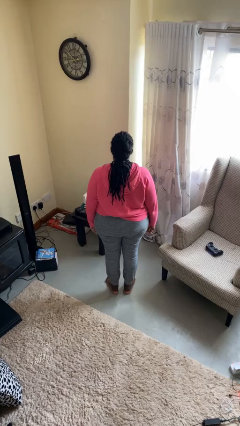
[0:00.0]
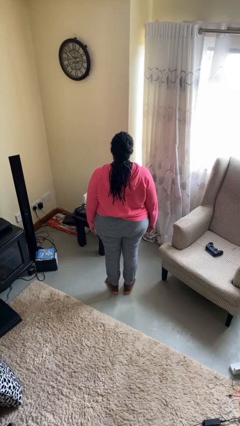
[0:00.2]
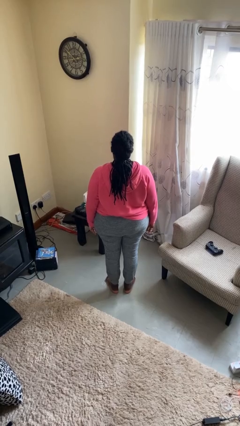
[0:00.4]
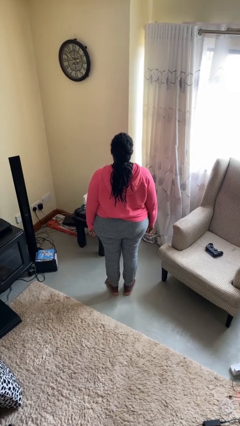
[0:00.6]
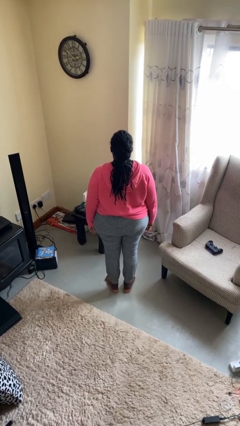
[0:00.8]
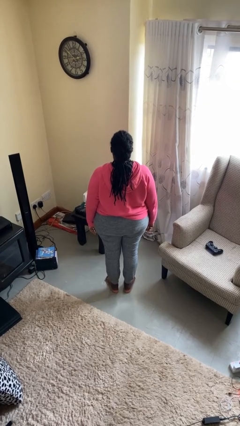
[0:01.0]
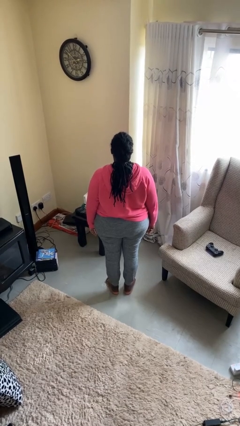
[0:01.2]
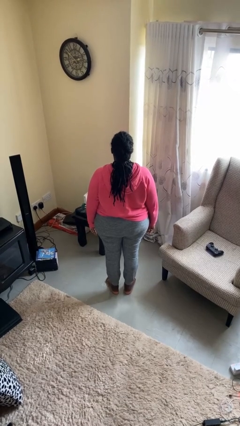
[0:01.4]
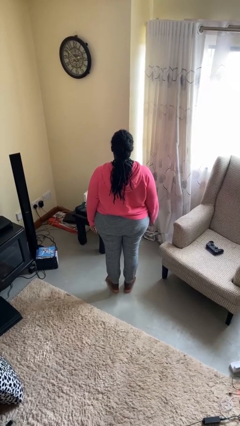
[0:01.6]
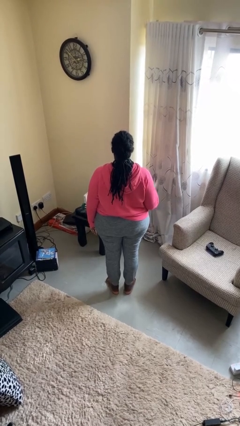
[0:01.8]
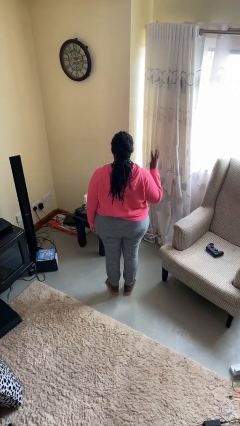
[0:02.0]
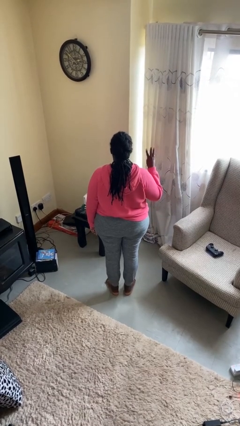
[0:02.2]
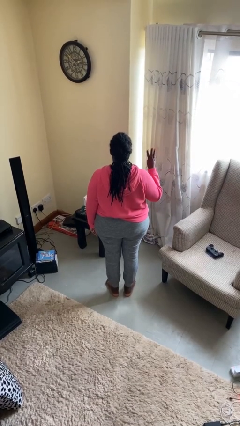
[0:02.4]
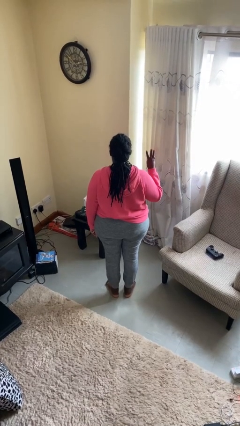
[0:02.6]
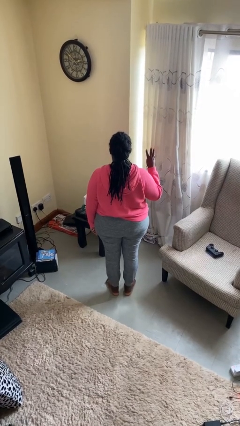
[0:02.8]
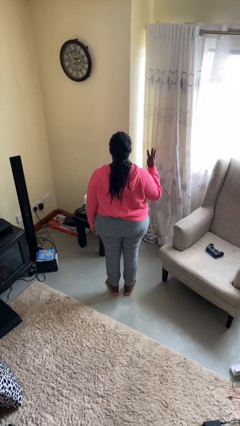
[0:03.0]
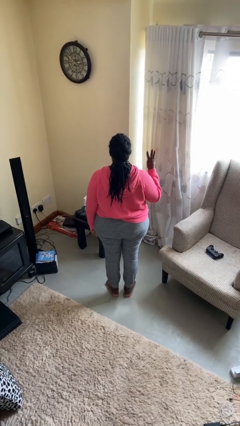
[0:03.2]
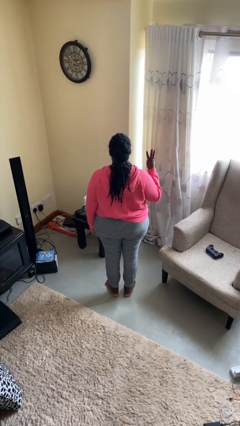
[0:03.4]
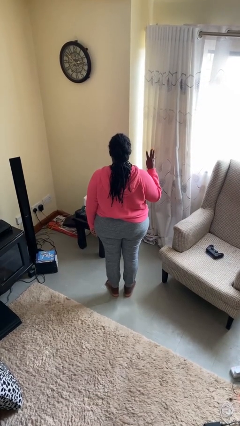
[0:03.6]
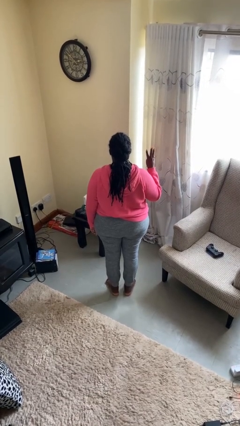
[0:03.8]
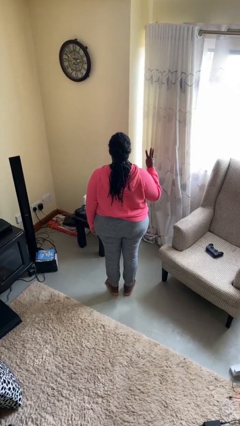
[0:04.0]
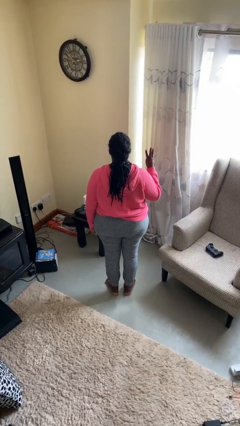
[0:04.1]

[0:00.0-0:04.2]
person gestures number three

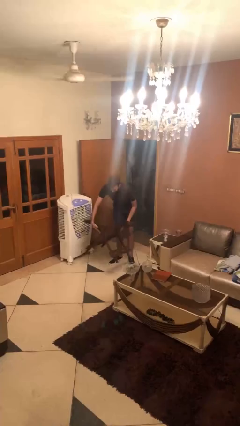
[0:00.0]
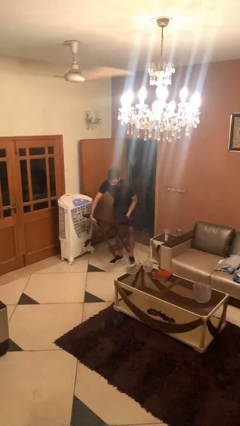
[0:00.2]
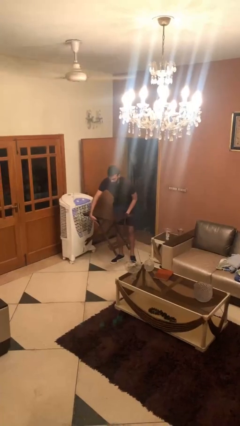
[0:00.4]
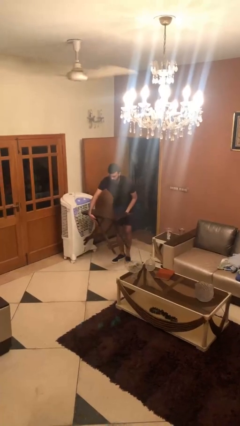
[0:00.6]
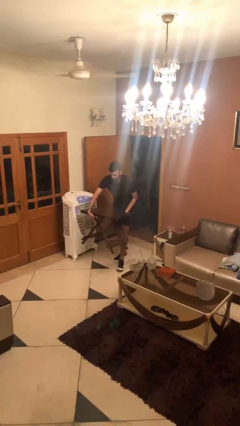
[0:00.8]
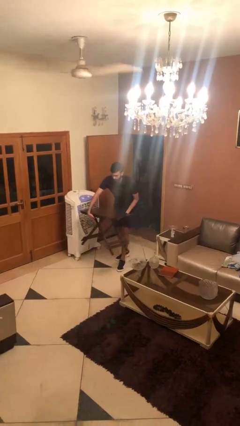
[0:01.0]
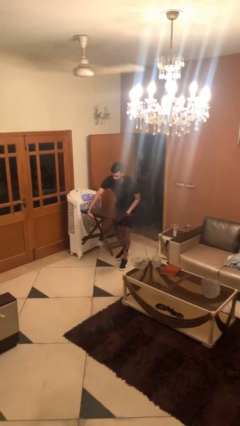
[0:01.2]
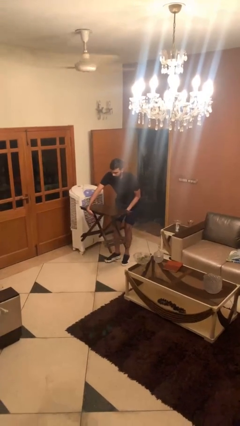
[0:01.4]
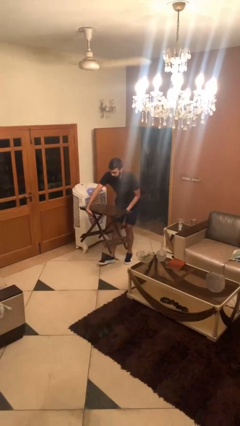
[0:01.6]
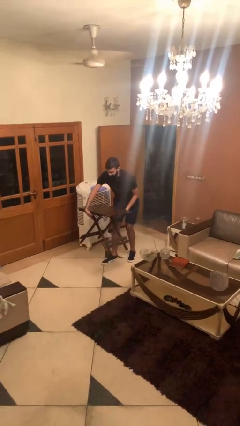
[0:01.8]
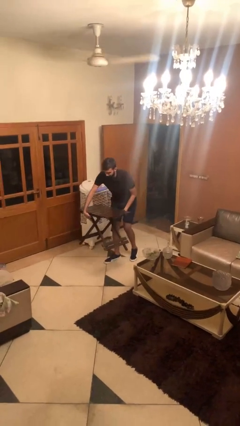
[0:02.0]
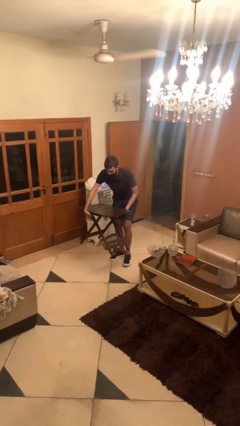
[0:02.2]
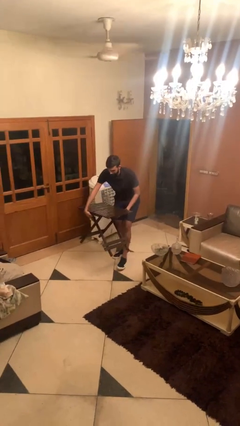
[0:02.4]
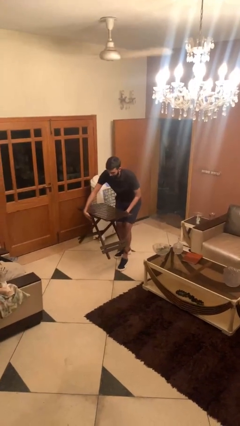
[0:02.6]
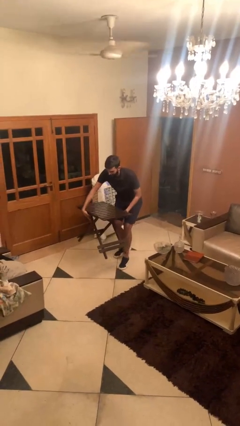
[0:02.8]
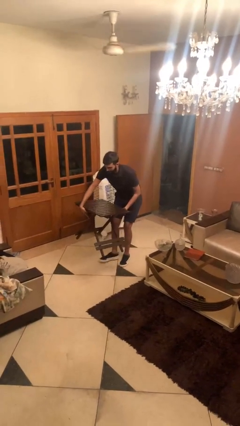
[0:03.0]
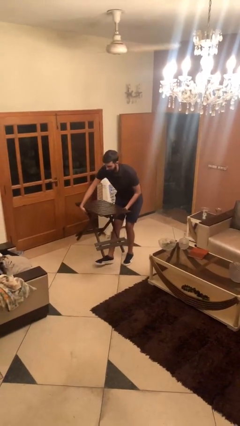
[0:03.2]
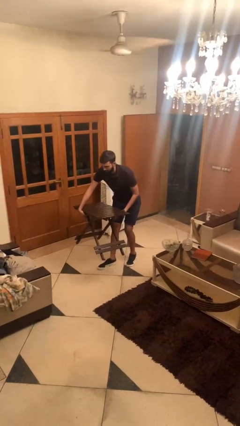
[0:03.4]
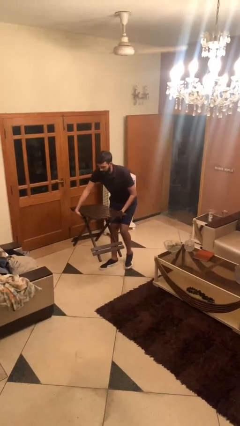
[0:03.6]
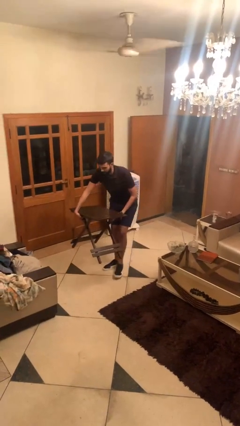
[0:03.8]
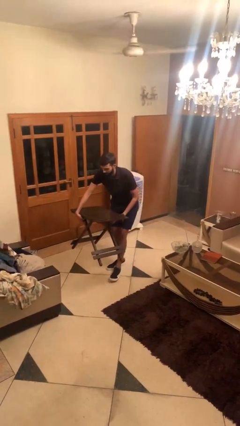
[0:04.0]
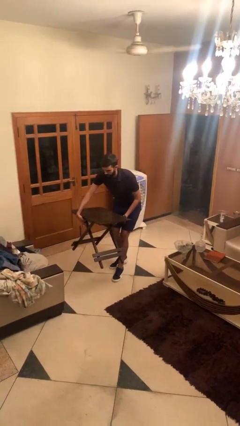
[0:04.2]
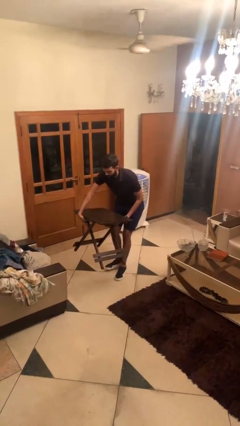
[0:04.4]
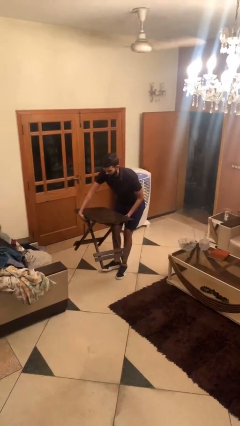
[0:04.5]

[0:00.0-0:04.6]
person carries heavy object

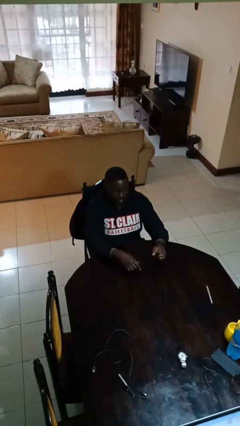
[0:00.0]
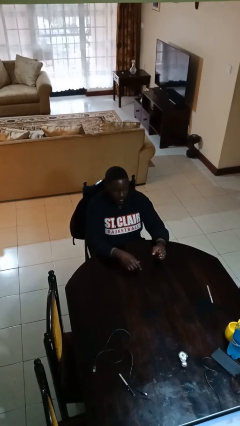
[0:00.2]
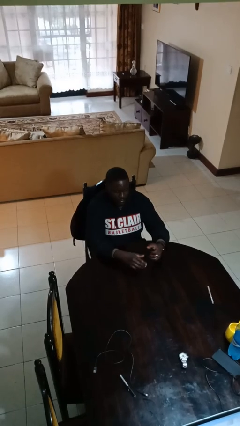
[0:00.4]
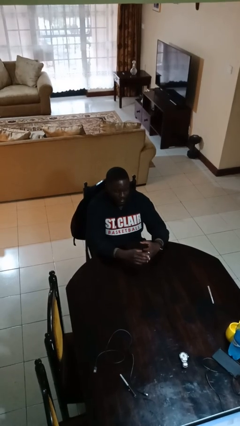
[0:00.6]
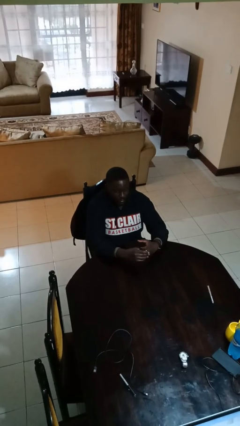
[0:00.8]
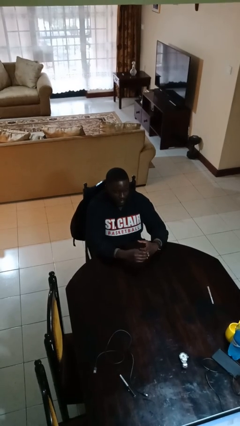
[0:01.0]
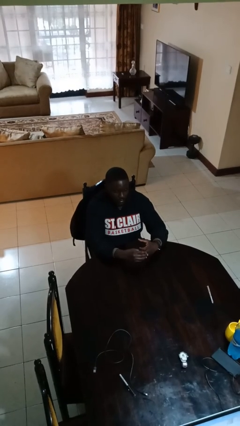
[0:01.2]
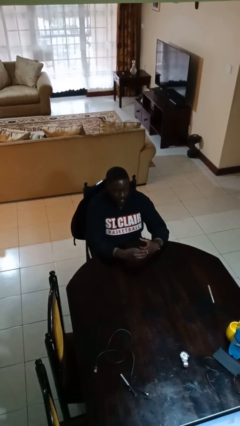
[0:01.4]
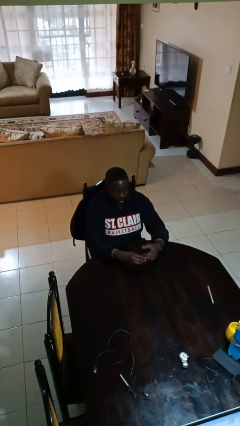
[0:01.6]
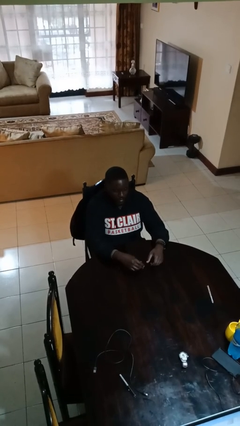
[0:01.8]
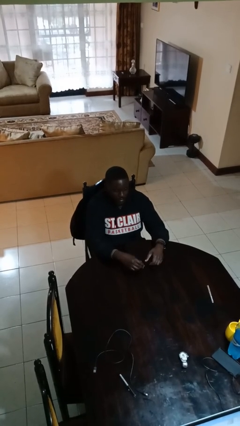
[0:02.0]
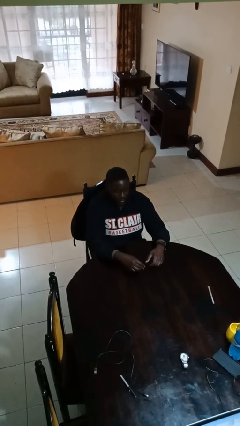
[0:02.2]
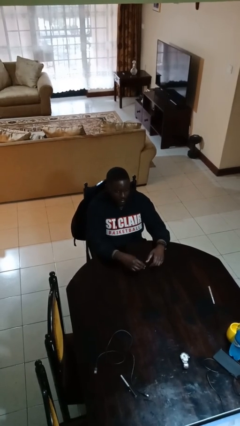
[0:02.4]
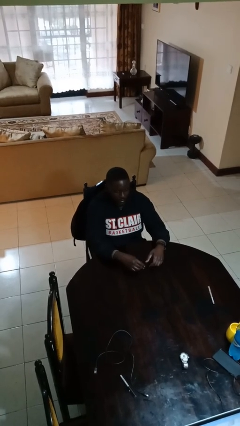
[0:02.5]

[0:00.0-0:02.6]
person takes off ring

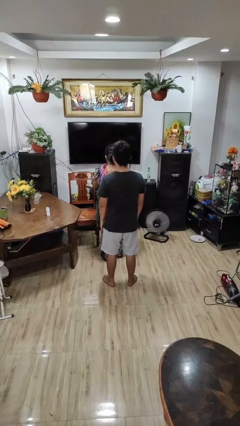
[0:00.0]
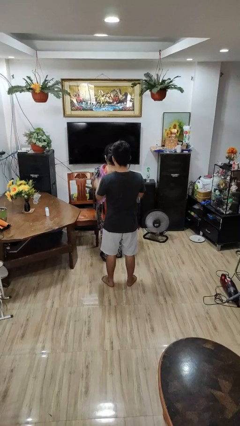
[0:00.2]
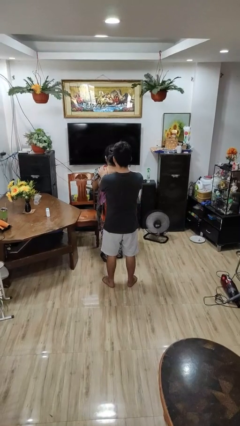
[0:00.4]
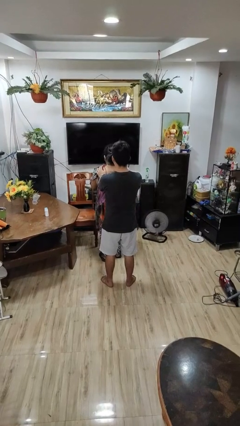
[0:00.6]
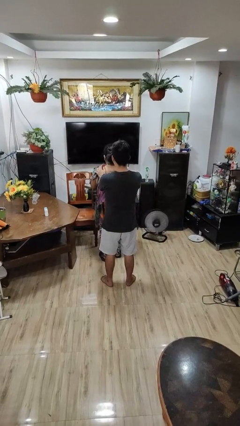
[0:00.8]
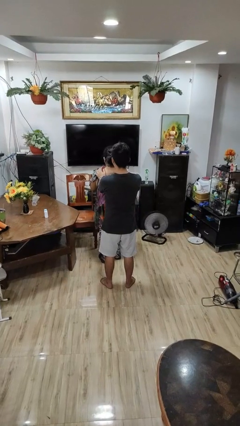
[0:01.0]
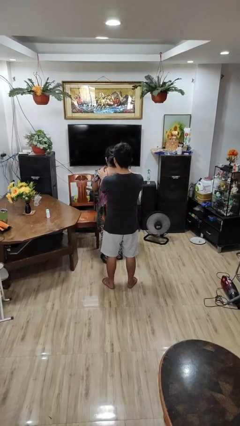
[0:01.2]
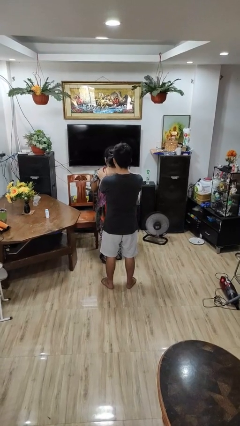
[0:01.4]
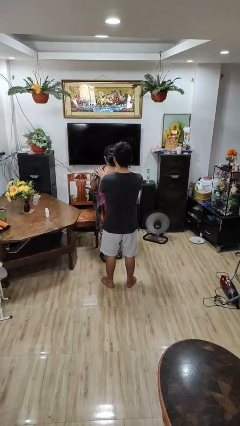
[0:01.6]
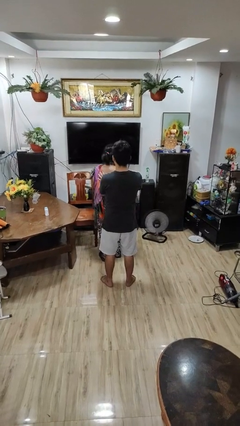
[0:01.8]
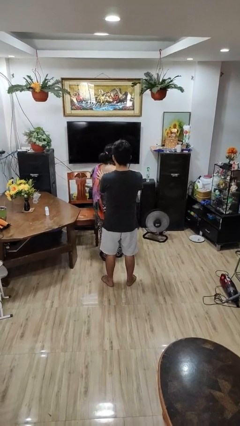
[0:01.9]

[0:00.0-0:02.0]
person grabs person by shoulder

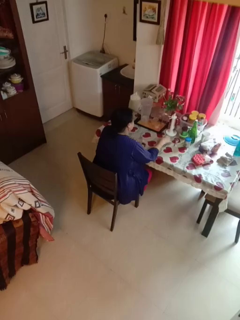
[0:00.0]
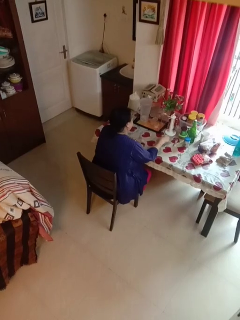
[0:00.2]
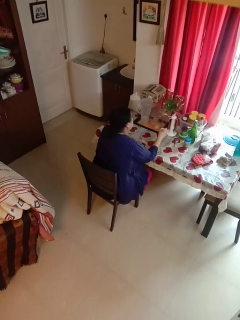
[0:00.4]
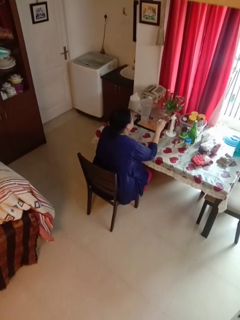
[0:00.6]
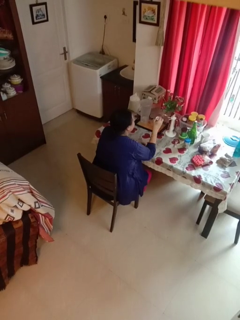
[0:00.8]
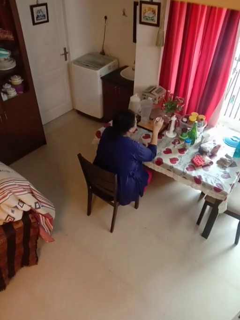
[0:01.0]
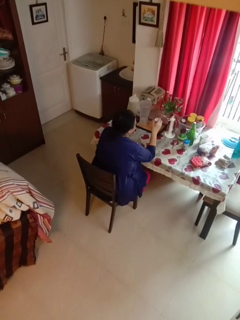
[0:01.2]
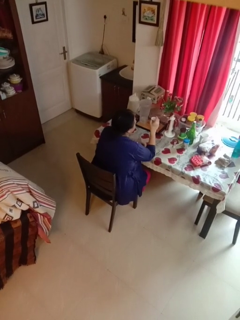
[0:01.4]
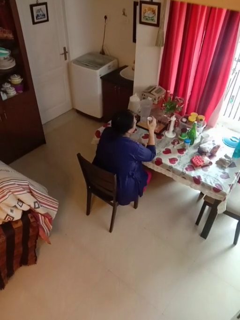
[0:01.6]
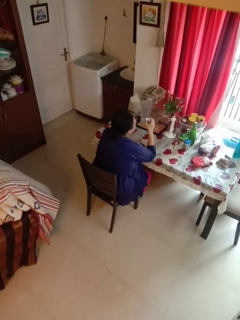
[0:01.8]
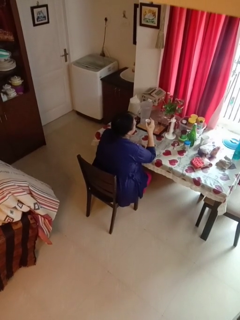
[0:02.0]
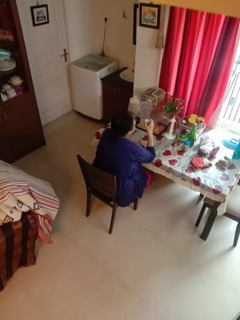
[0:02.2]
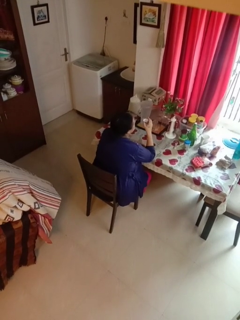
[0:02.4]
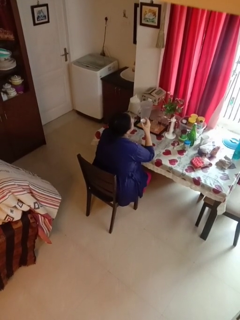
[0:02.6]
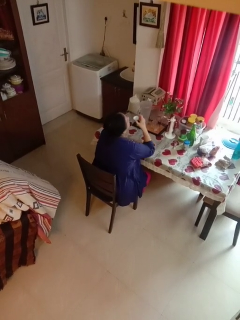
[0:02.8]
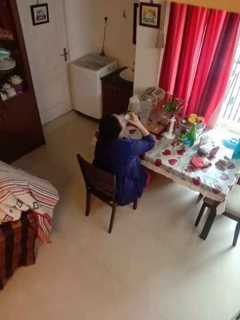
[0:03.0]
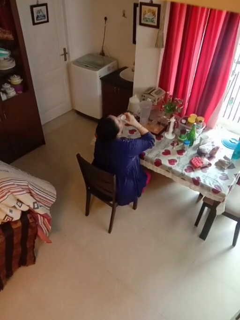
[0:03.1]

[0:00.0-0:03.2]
person picks up object from table

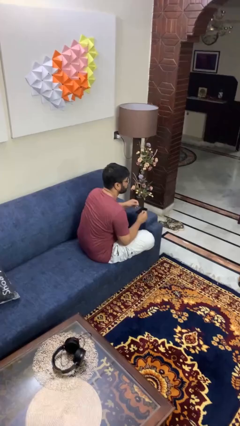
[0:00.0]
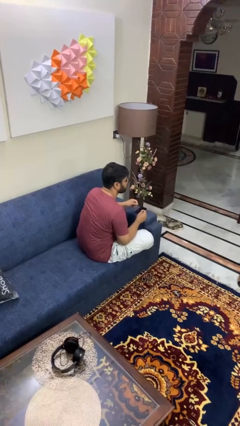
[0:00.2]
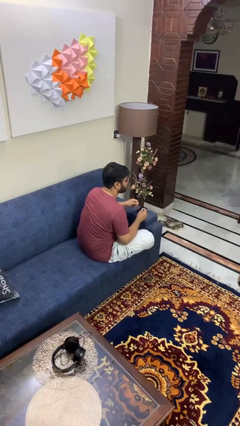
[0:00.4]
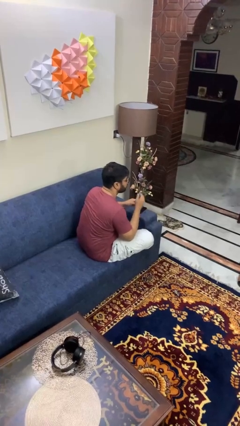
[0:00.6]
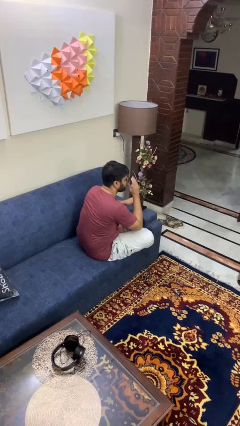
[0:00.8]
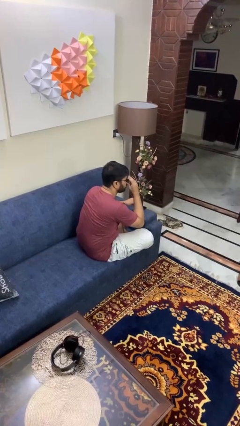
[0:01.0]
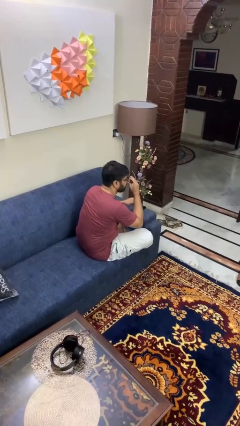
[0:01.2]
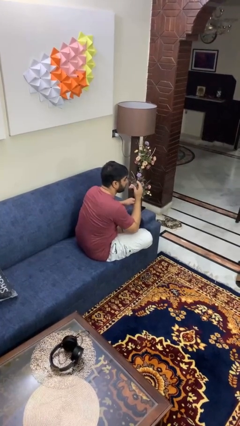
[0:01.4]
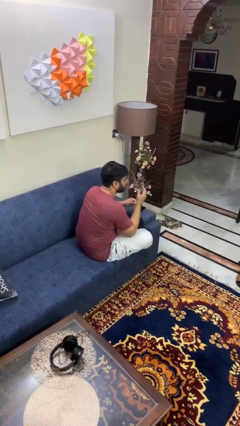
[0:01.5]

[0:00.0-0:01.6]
person takes off glasses
